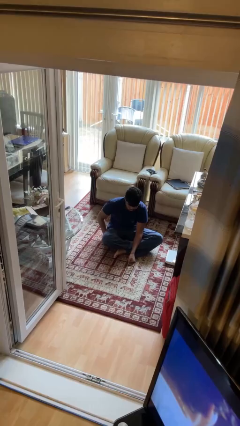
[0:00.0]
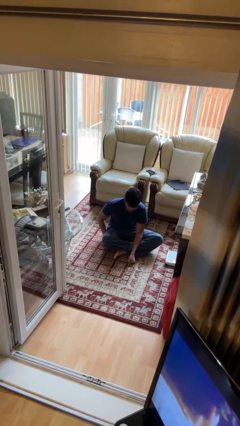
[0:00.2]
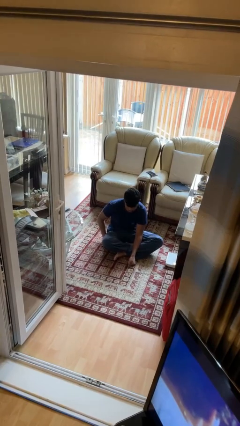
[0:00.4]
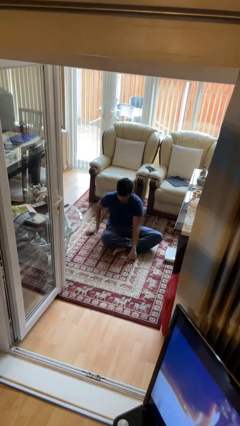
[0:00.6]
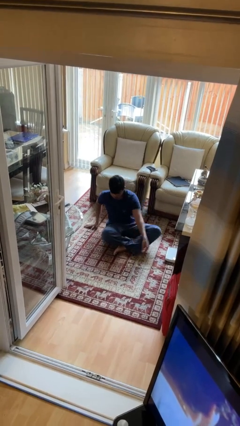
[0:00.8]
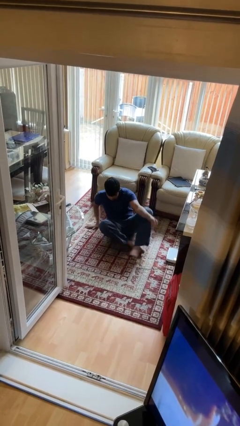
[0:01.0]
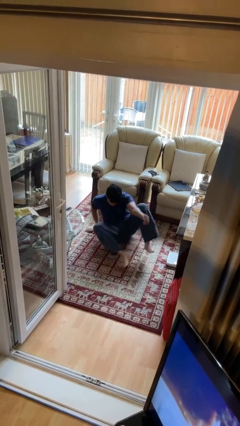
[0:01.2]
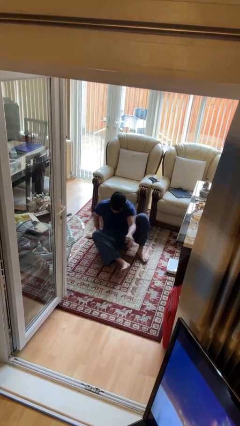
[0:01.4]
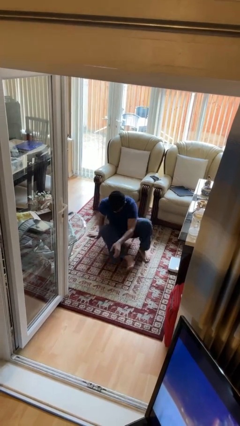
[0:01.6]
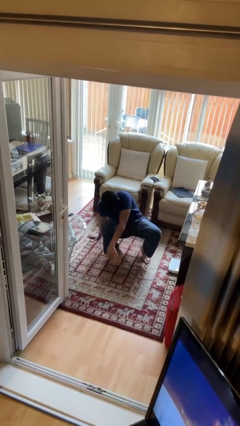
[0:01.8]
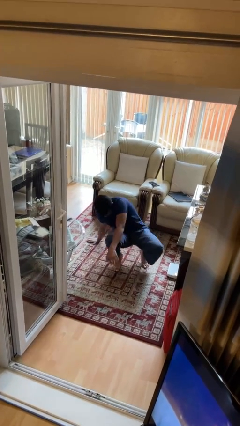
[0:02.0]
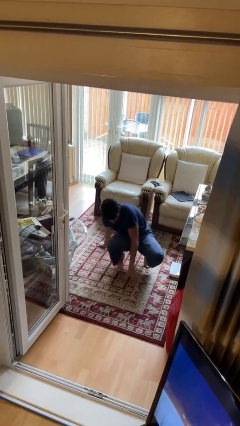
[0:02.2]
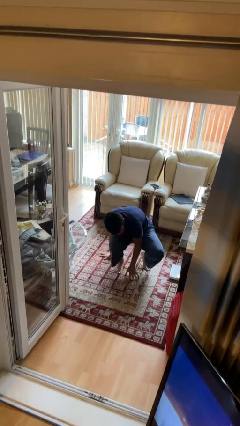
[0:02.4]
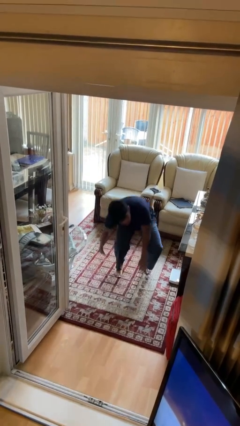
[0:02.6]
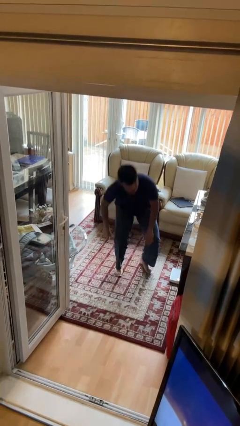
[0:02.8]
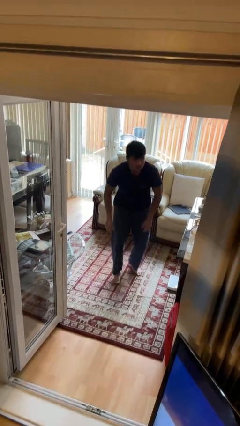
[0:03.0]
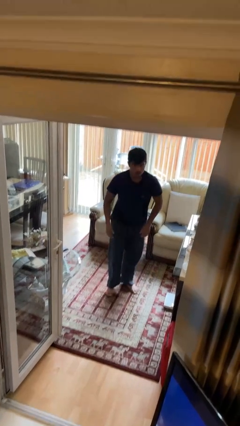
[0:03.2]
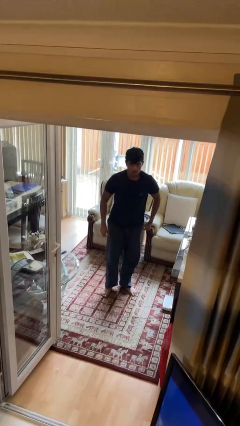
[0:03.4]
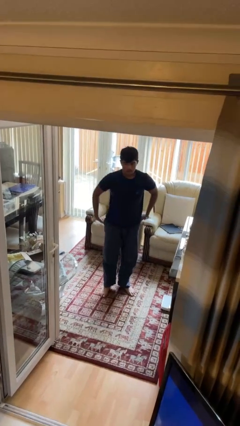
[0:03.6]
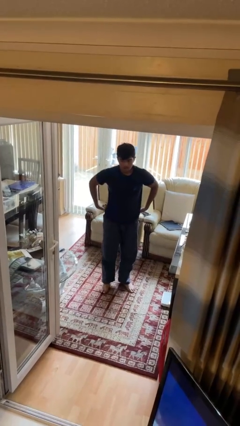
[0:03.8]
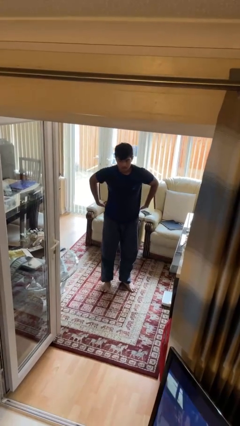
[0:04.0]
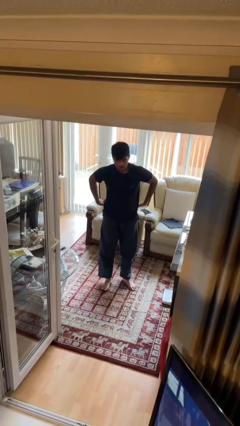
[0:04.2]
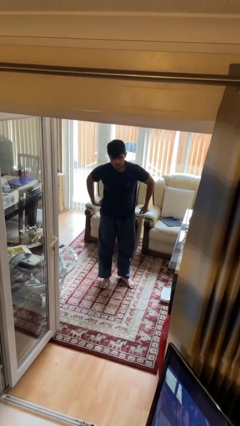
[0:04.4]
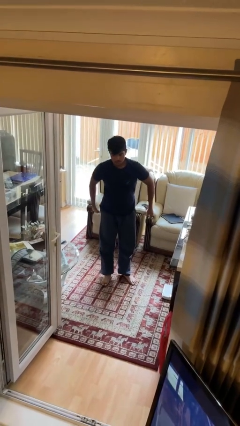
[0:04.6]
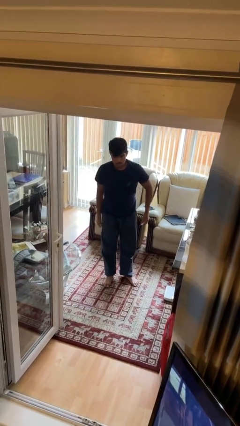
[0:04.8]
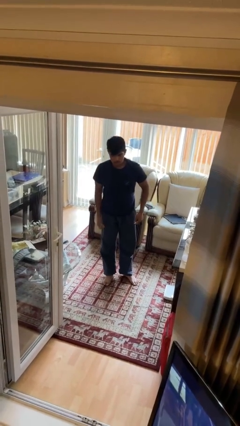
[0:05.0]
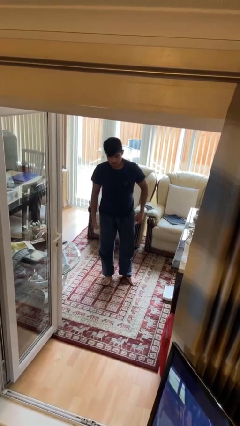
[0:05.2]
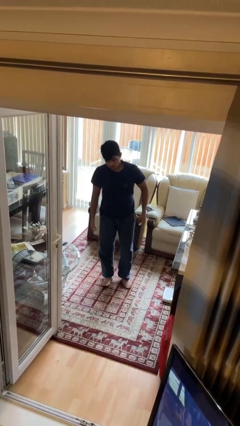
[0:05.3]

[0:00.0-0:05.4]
person stands up from floor

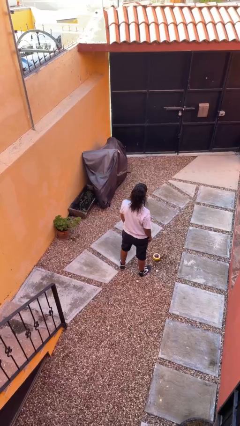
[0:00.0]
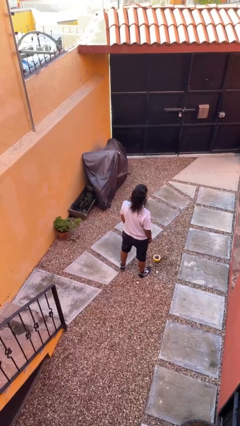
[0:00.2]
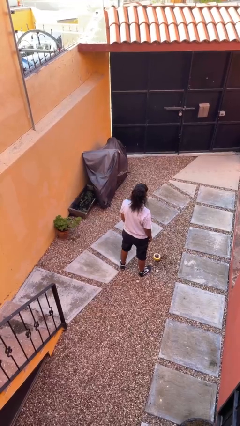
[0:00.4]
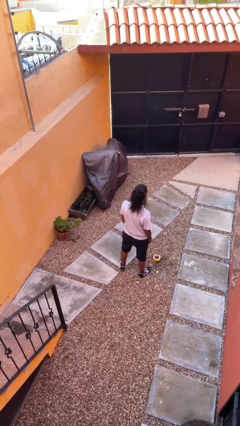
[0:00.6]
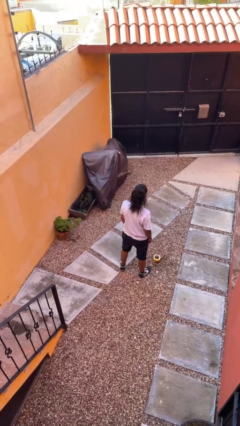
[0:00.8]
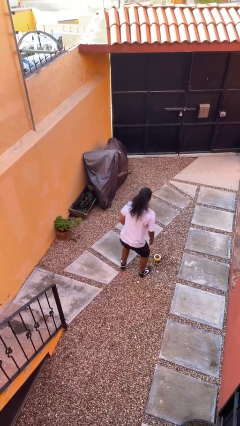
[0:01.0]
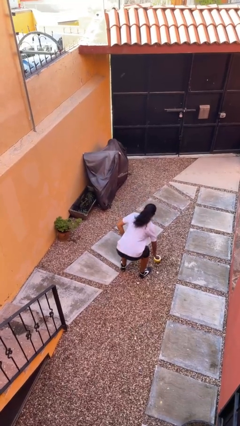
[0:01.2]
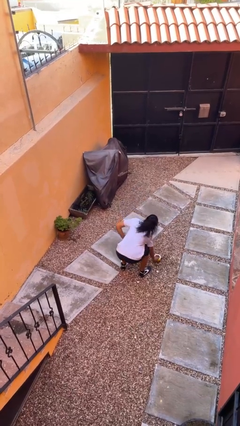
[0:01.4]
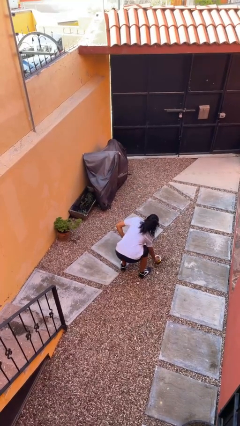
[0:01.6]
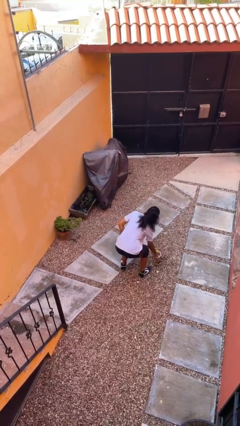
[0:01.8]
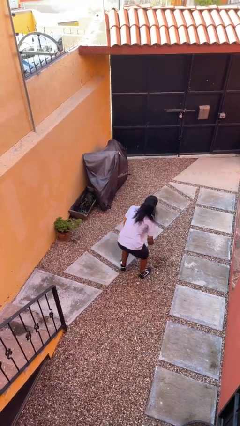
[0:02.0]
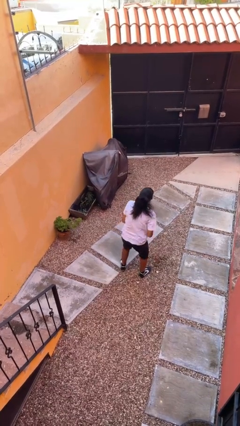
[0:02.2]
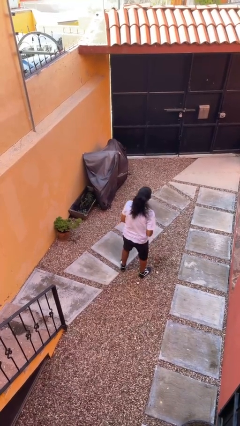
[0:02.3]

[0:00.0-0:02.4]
person picks up object from floor

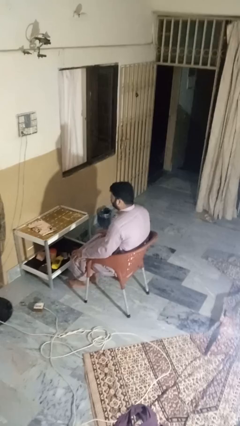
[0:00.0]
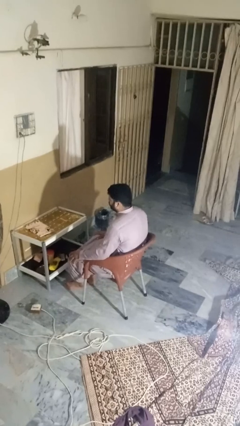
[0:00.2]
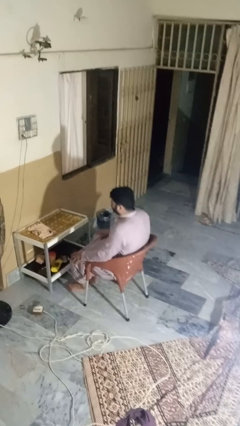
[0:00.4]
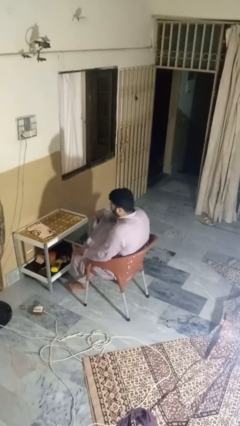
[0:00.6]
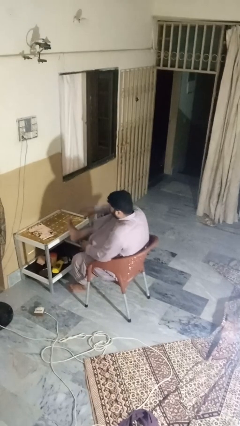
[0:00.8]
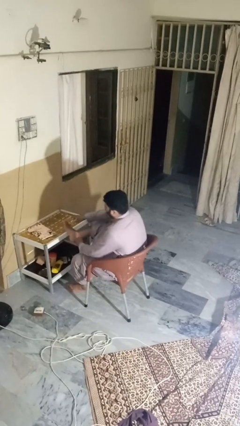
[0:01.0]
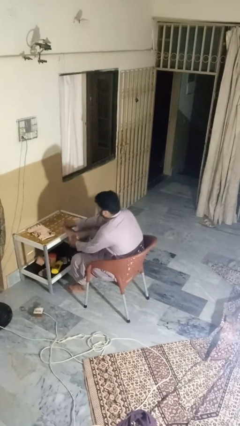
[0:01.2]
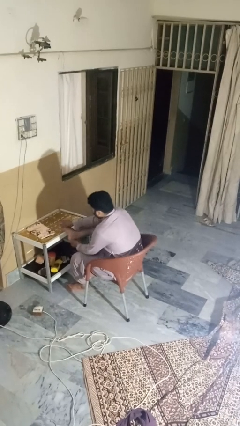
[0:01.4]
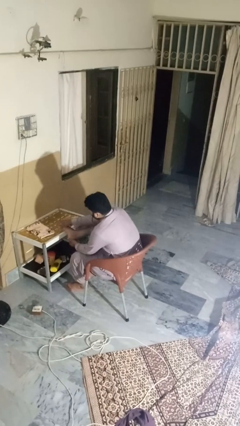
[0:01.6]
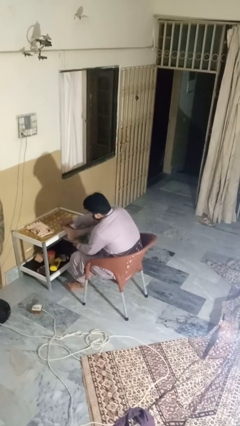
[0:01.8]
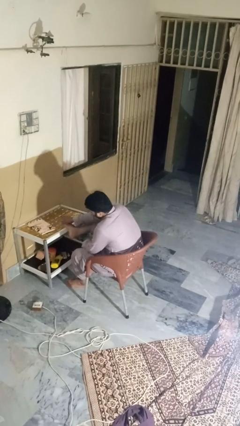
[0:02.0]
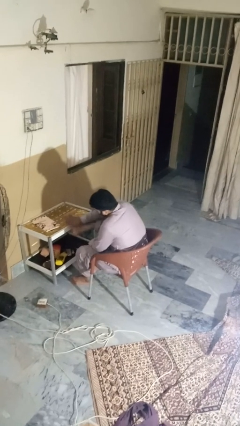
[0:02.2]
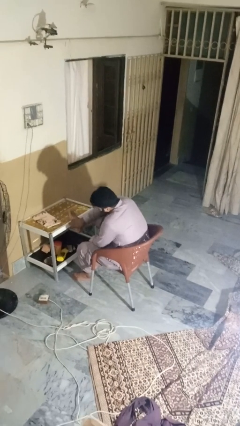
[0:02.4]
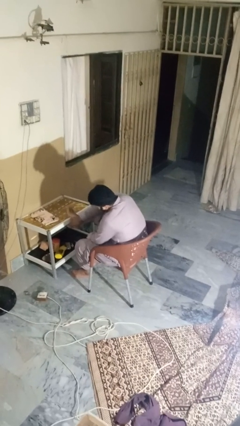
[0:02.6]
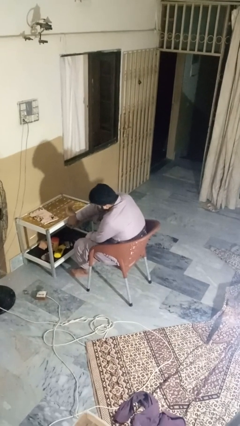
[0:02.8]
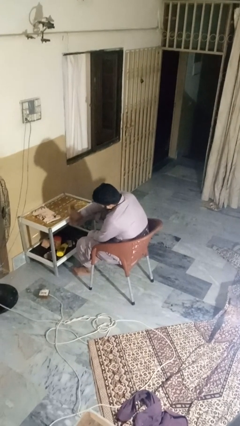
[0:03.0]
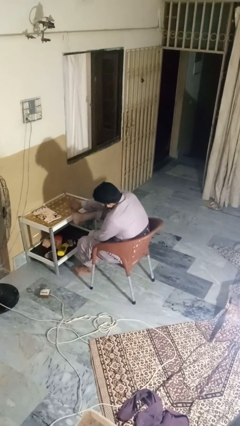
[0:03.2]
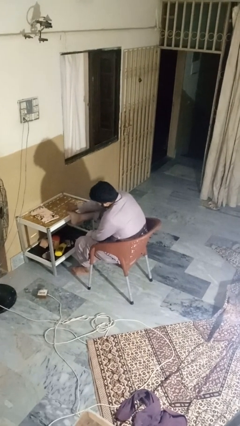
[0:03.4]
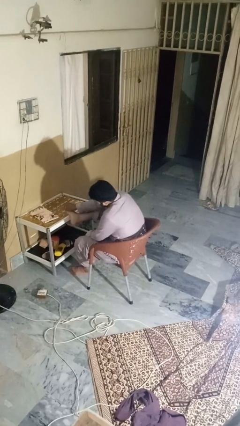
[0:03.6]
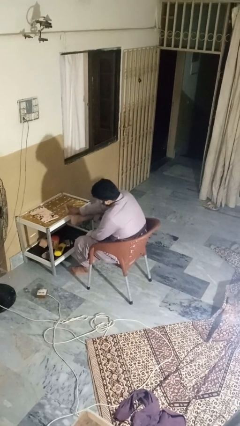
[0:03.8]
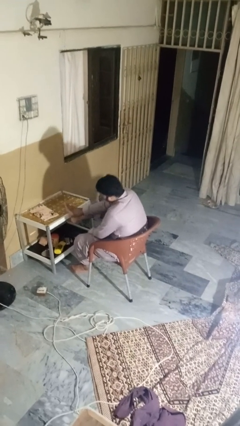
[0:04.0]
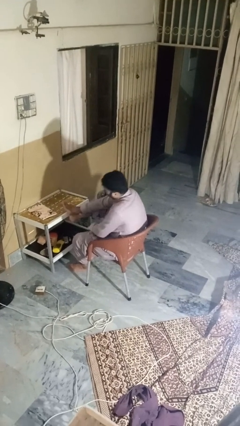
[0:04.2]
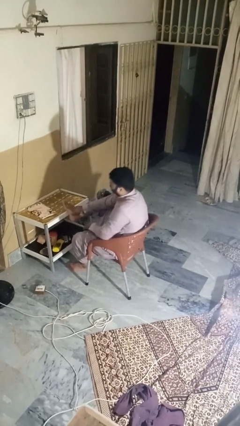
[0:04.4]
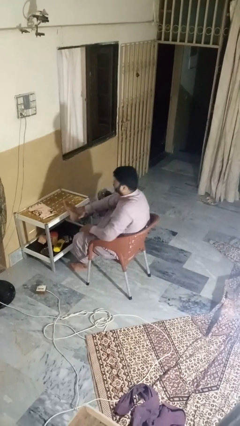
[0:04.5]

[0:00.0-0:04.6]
person stubs toe

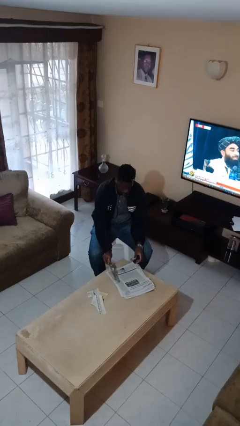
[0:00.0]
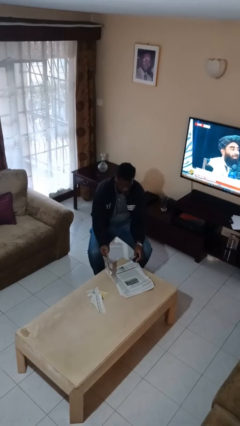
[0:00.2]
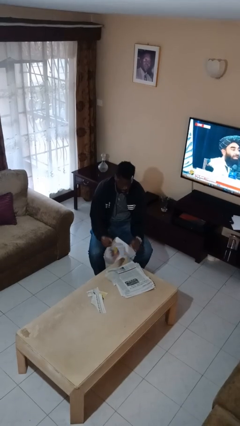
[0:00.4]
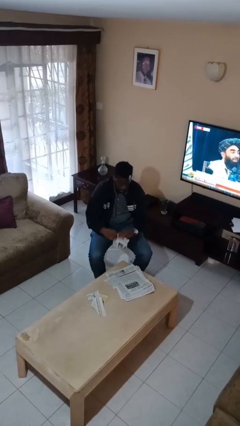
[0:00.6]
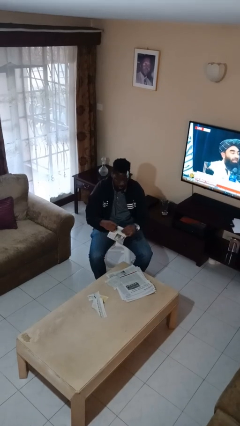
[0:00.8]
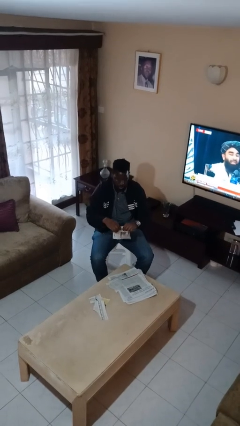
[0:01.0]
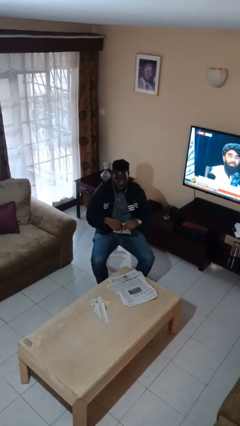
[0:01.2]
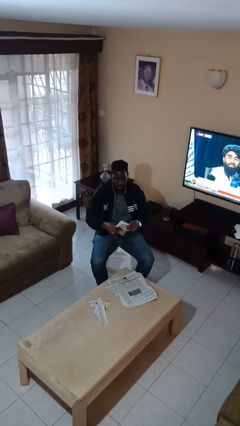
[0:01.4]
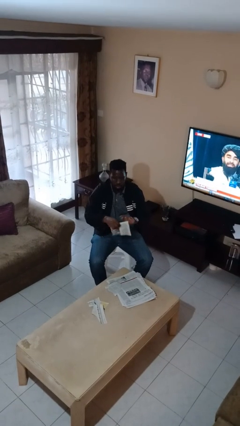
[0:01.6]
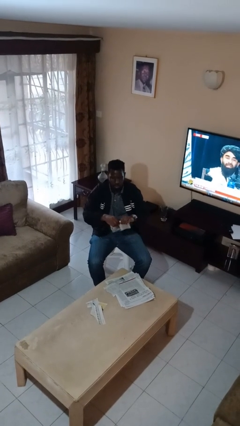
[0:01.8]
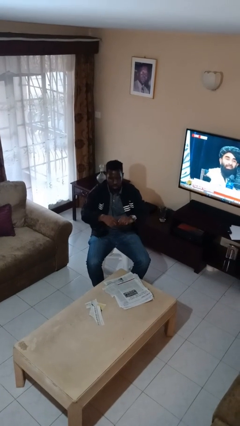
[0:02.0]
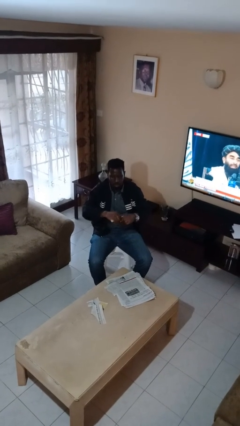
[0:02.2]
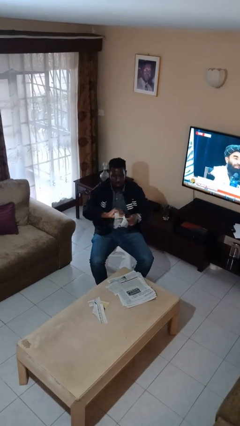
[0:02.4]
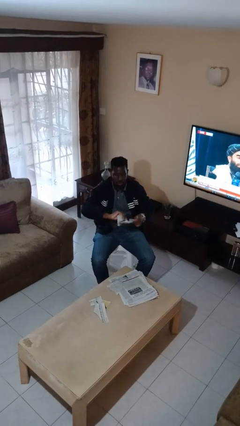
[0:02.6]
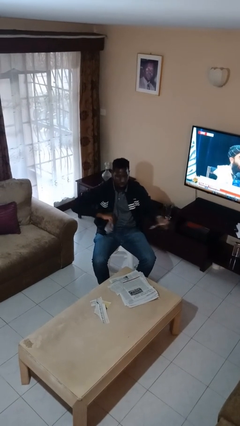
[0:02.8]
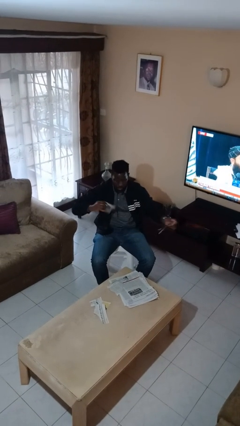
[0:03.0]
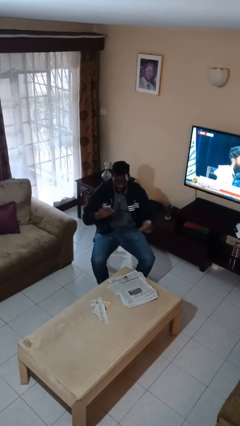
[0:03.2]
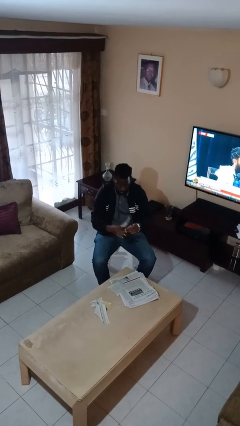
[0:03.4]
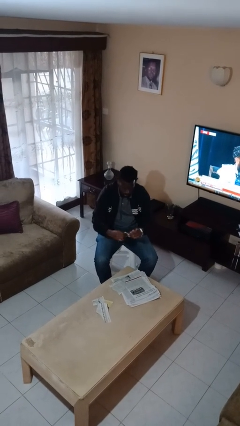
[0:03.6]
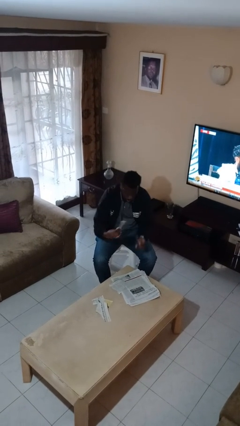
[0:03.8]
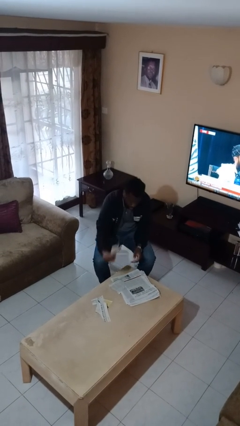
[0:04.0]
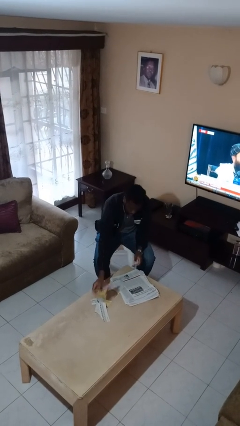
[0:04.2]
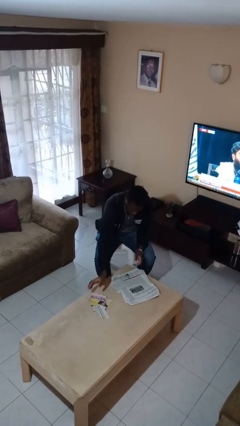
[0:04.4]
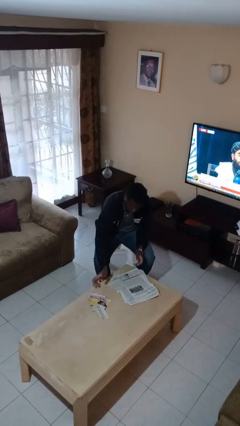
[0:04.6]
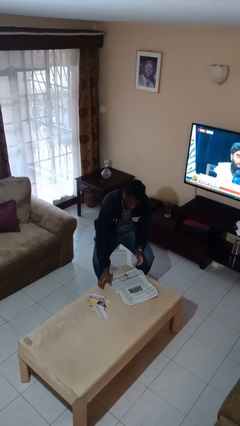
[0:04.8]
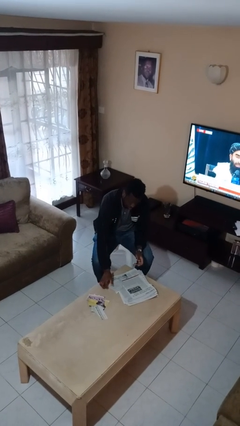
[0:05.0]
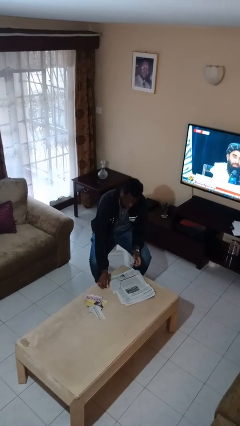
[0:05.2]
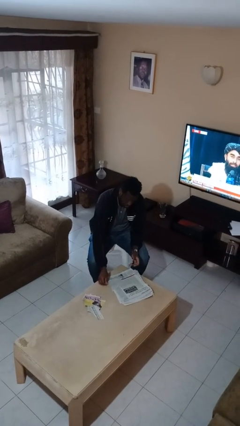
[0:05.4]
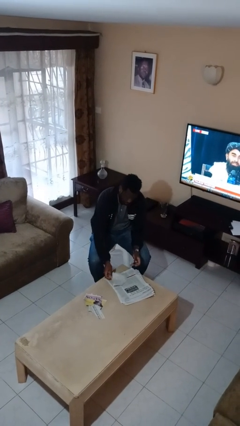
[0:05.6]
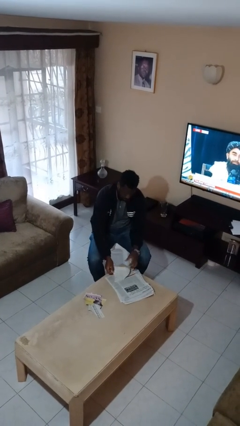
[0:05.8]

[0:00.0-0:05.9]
person tears paper
